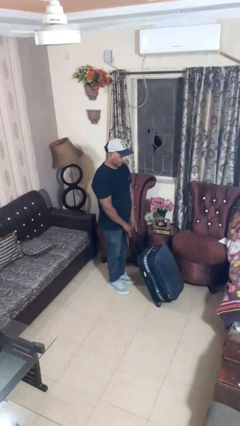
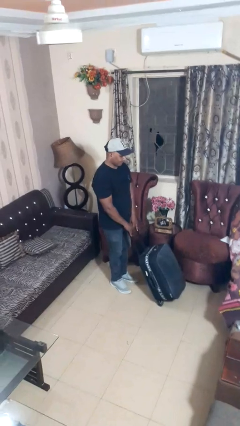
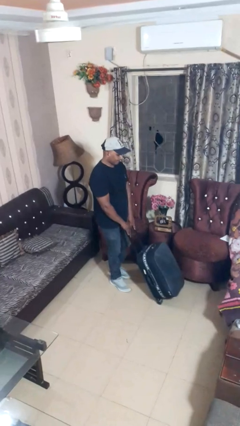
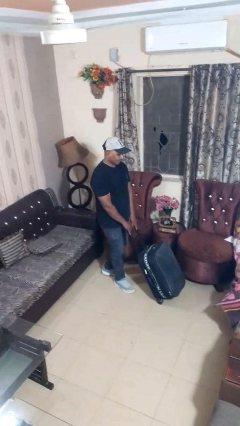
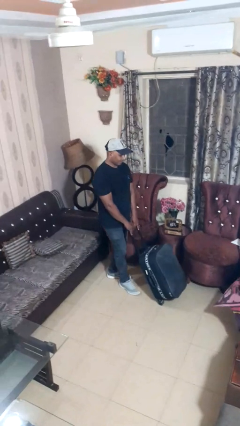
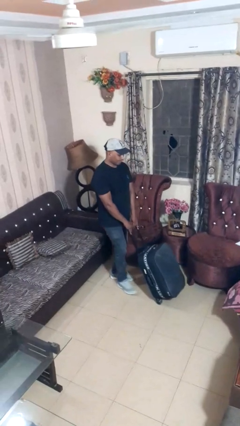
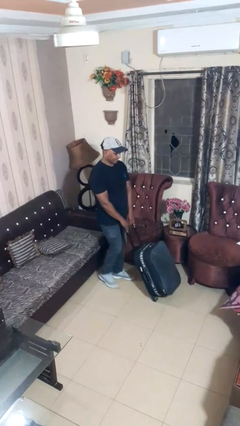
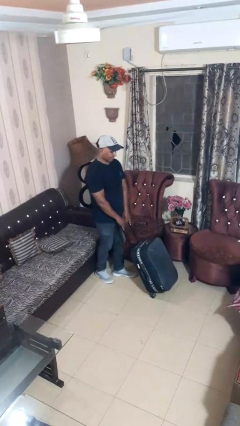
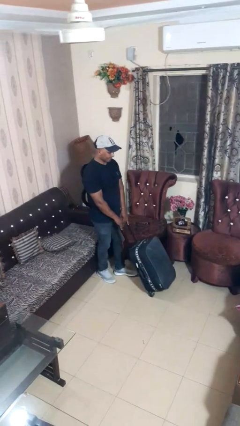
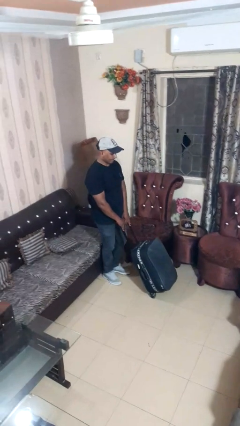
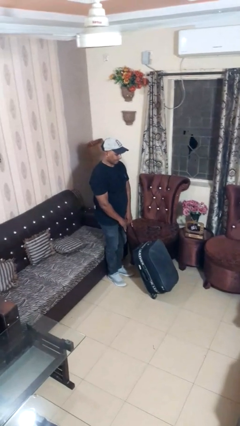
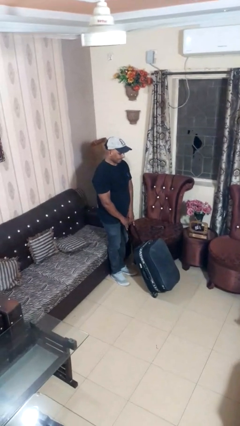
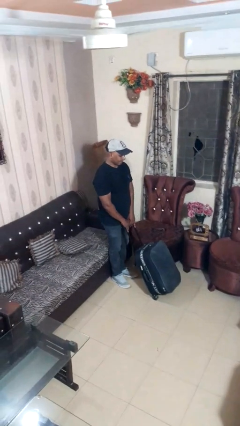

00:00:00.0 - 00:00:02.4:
person pulls wheeled cart

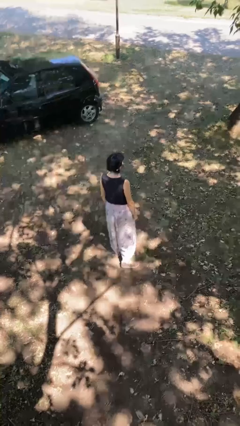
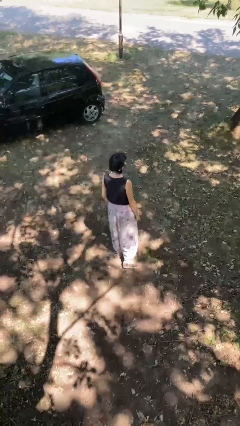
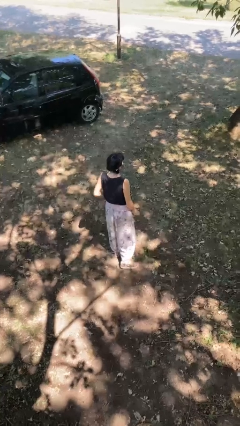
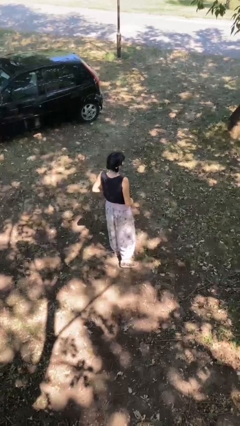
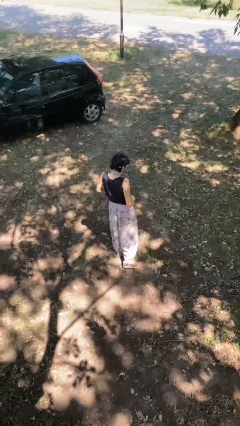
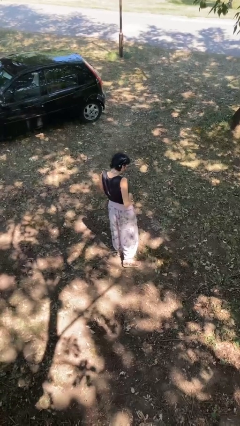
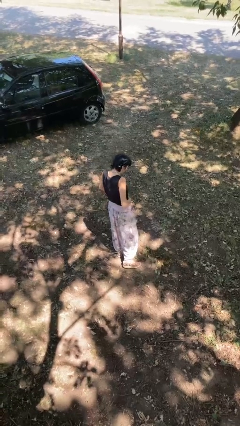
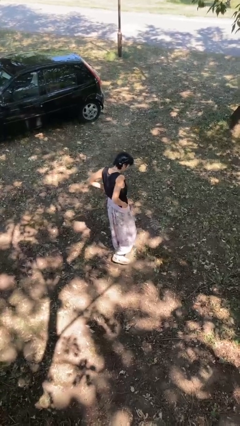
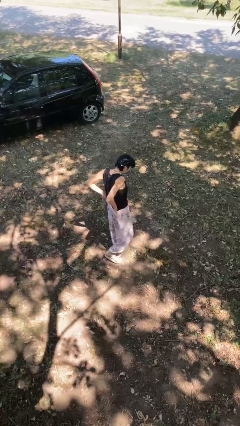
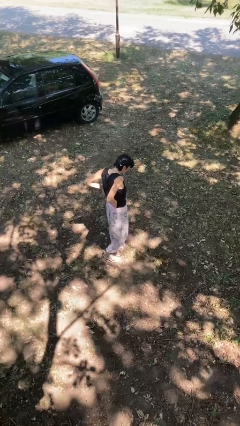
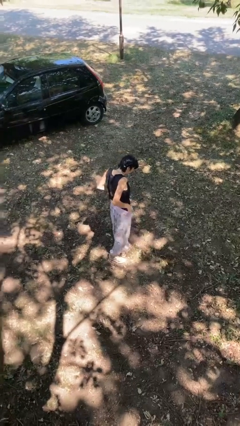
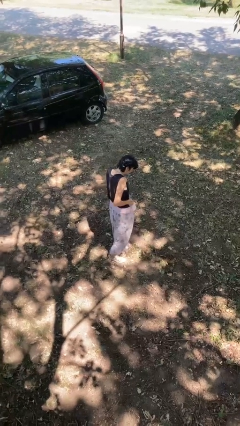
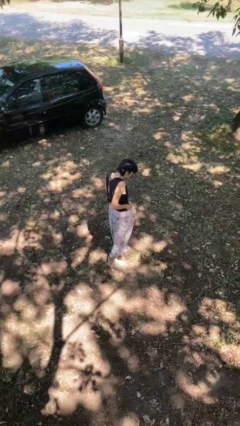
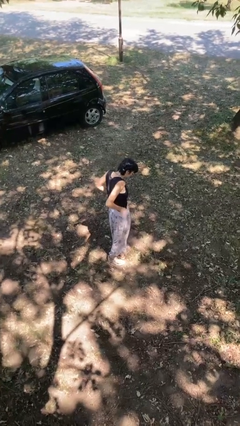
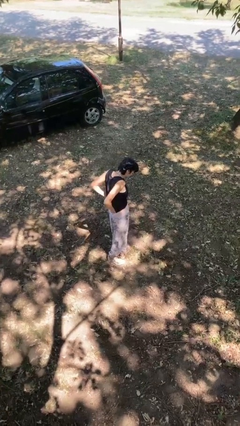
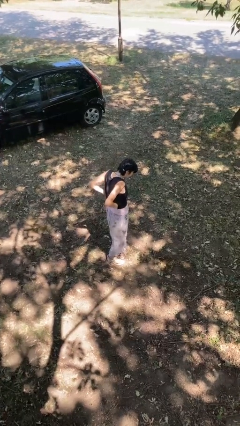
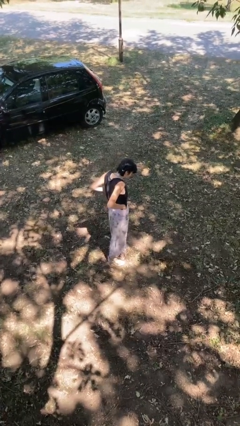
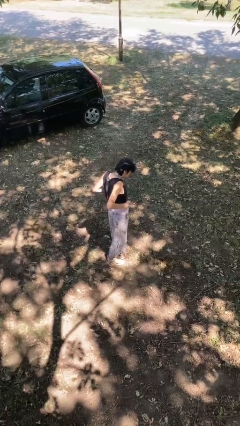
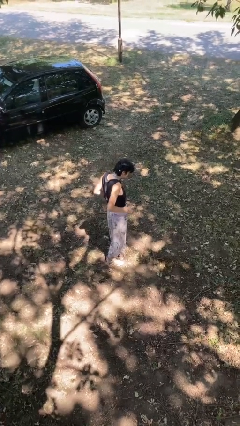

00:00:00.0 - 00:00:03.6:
person hikes up pants

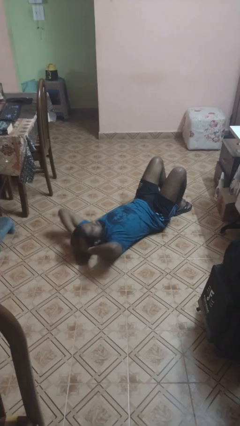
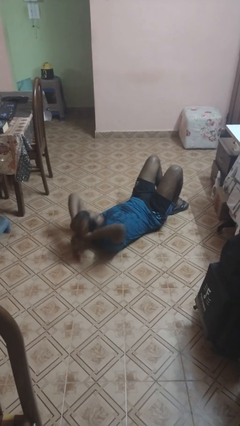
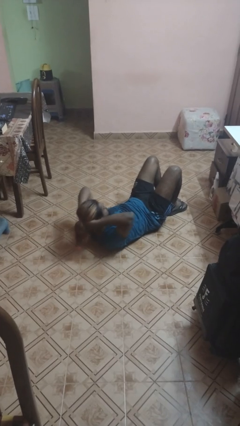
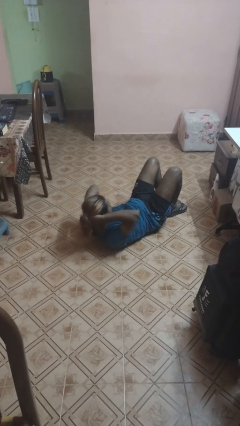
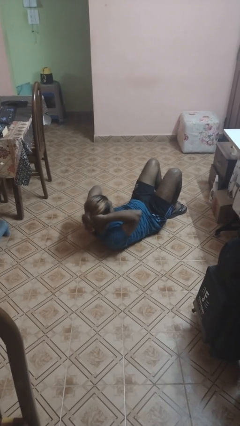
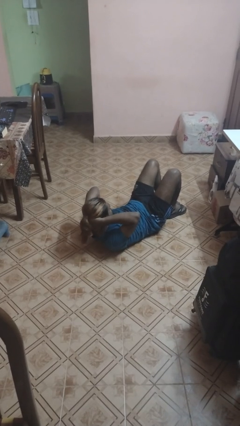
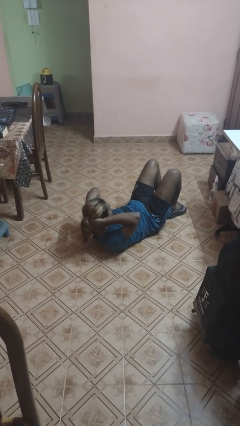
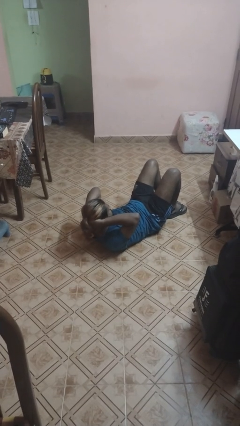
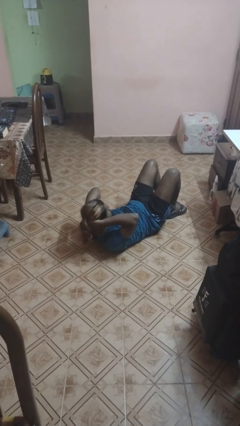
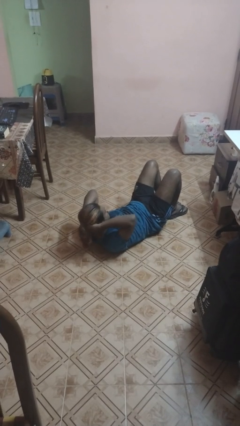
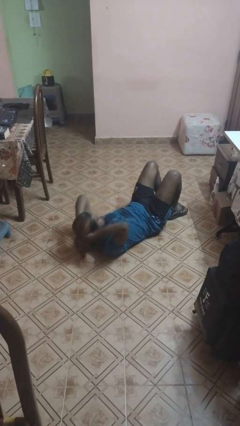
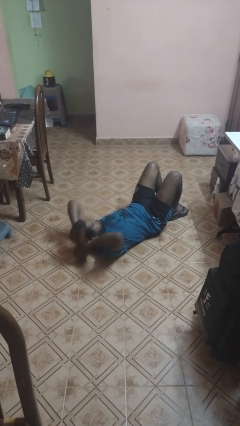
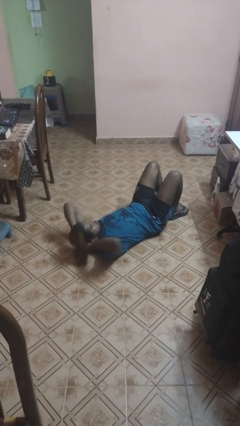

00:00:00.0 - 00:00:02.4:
person exercises with situp

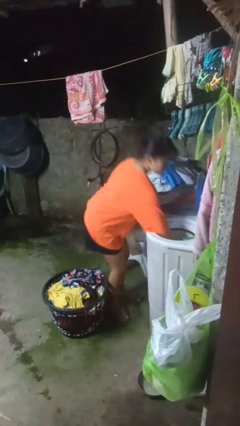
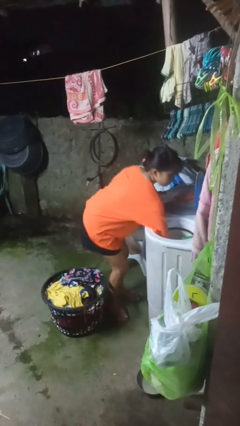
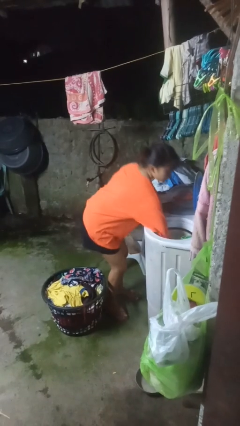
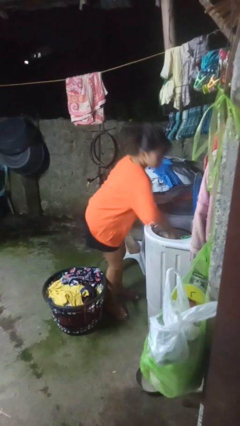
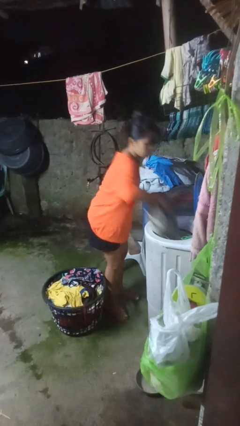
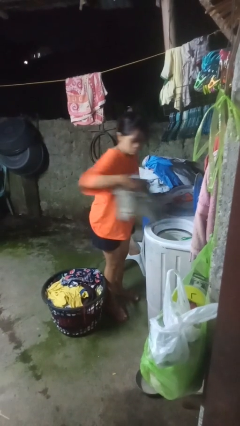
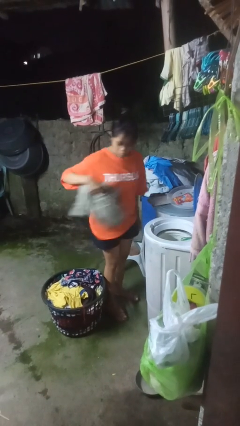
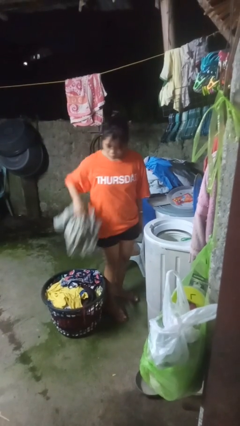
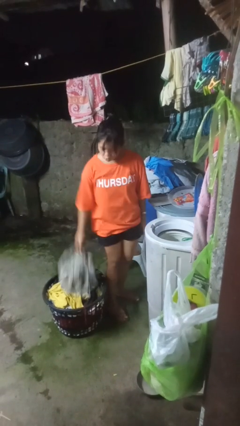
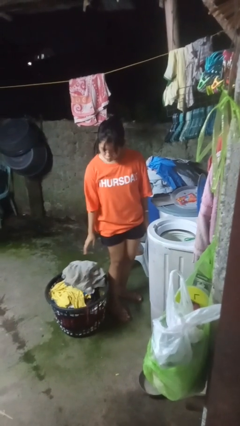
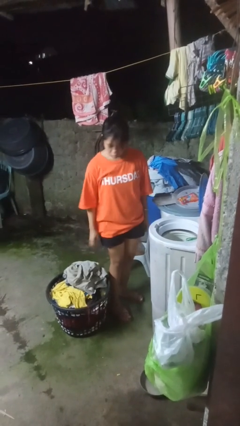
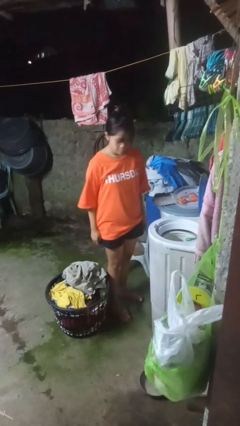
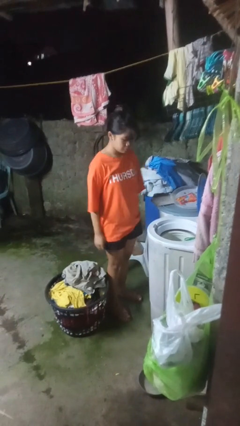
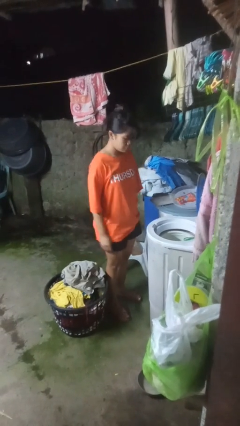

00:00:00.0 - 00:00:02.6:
person unloads dryer

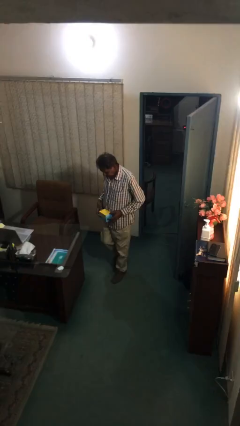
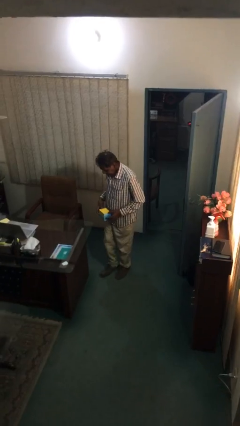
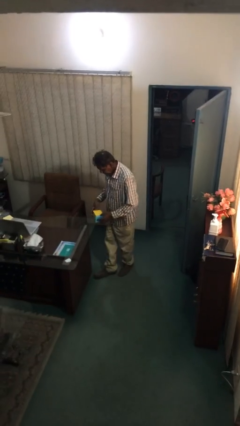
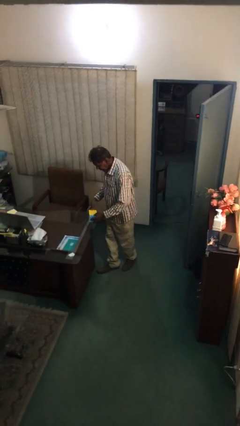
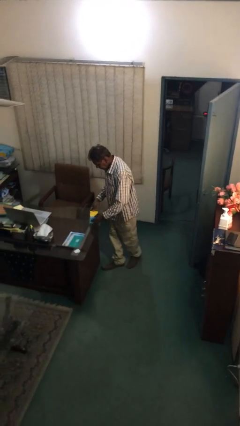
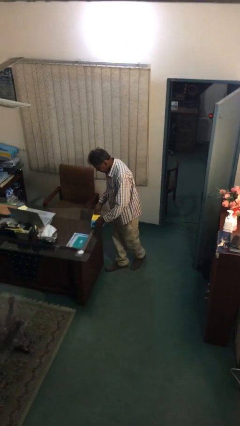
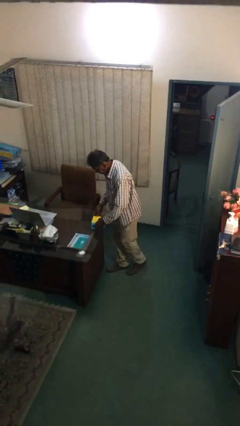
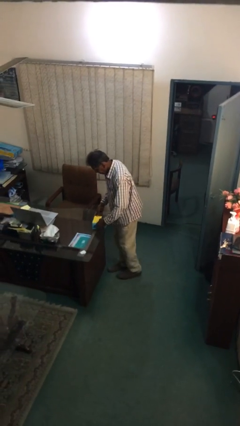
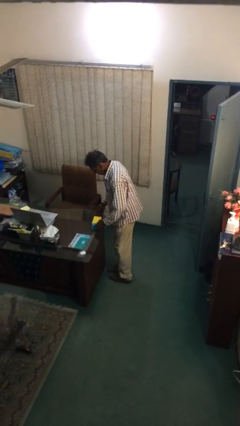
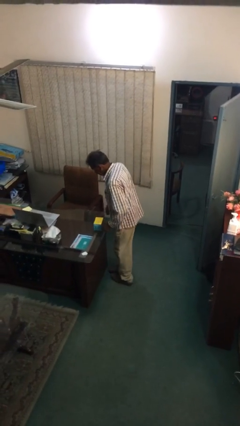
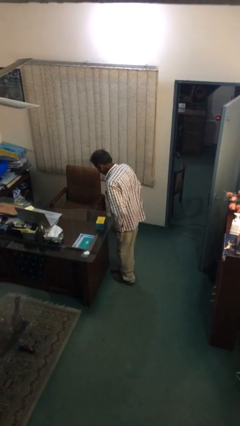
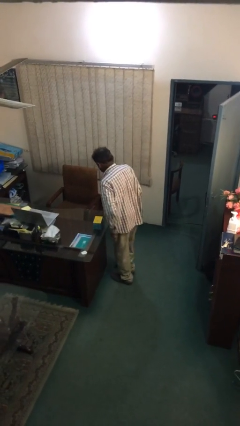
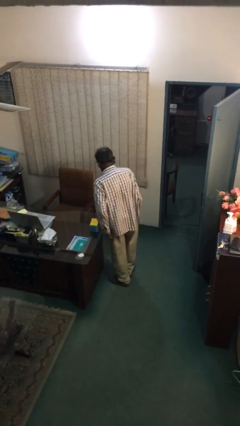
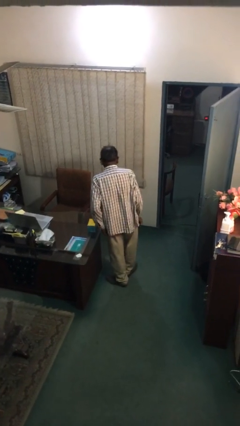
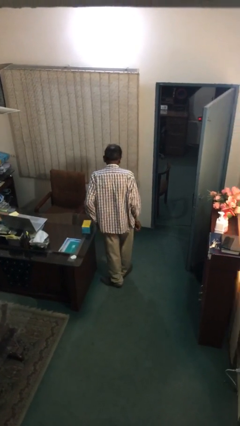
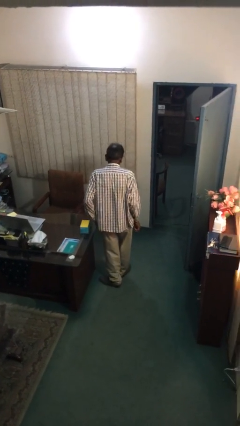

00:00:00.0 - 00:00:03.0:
person puts down object on table

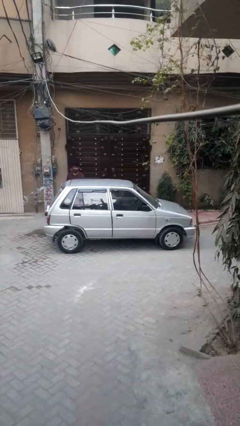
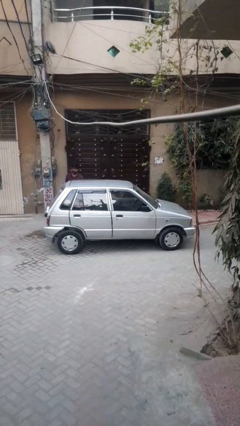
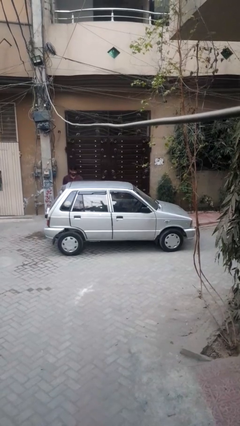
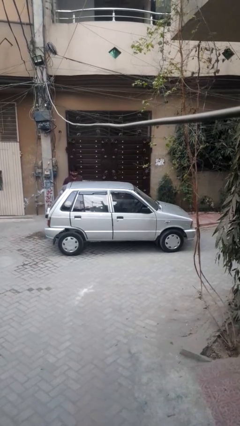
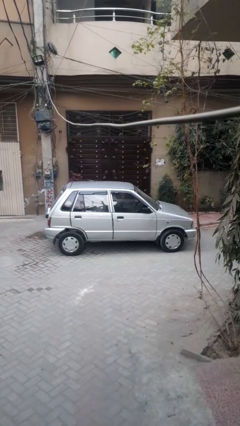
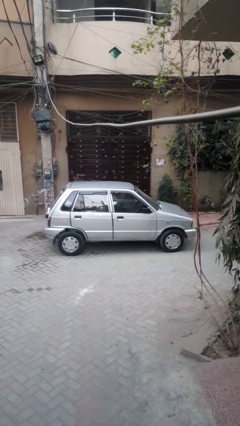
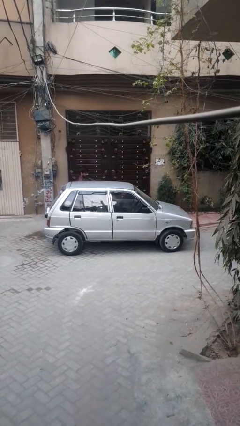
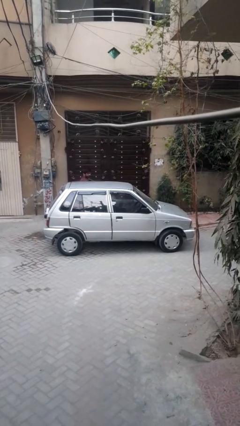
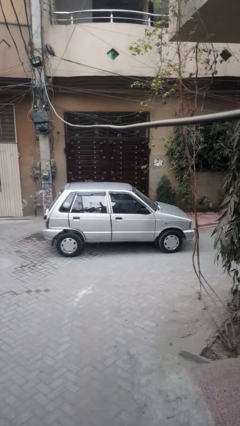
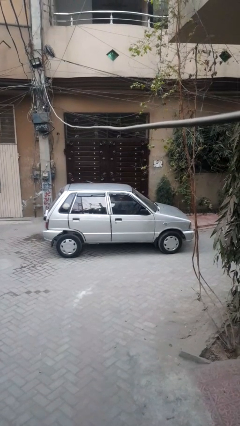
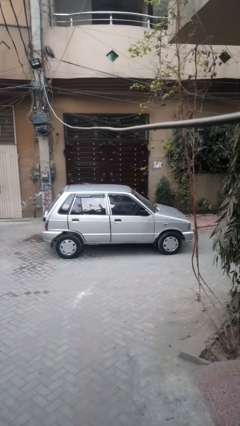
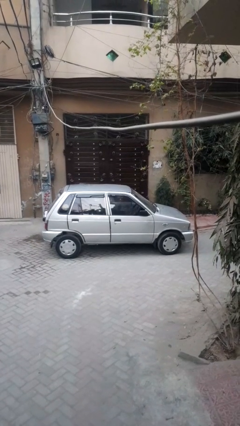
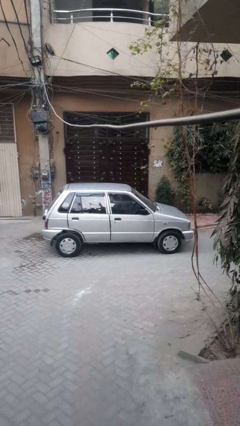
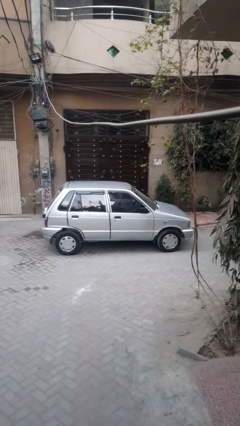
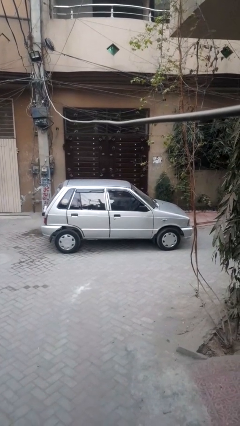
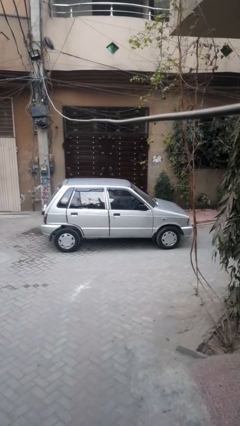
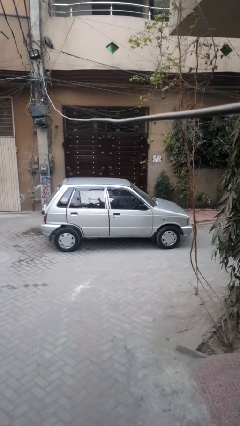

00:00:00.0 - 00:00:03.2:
car picks up person
